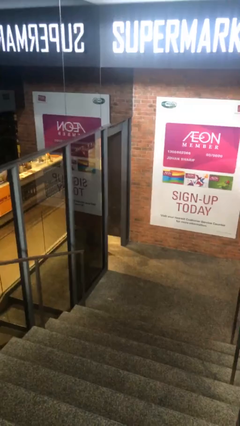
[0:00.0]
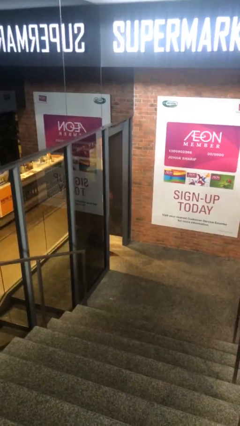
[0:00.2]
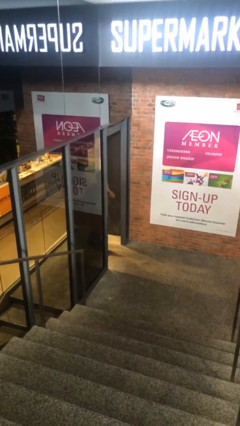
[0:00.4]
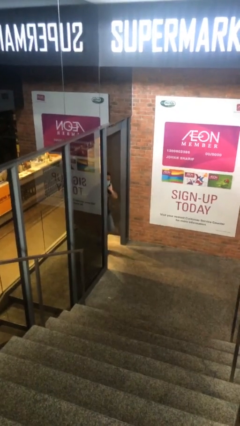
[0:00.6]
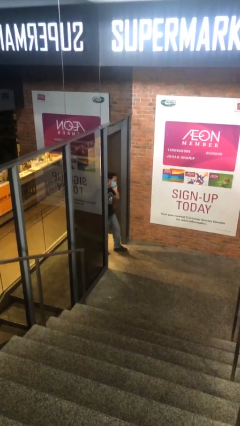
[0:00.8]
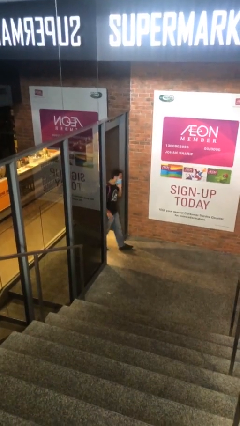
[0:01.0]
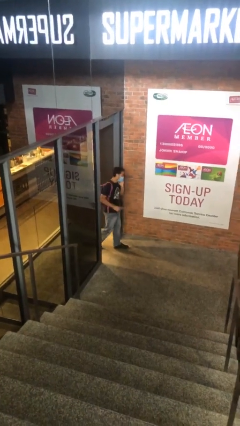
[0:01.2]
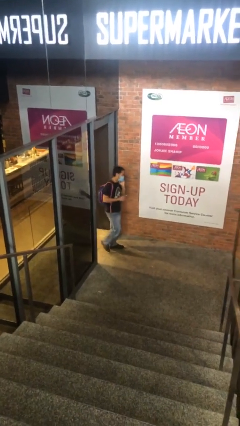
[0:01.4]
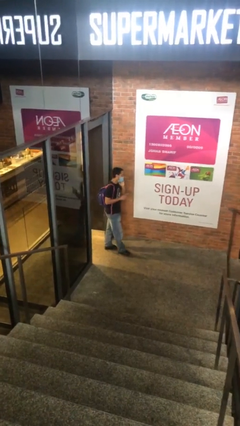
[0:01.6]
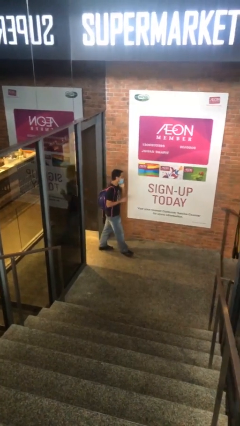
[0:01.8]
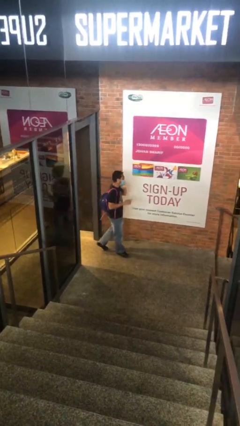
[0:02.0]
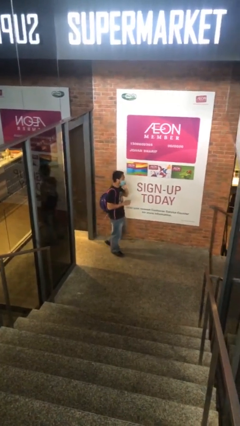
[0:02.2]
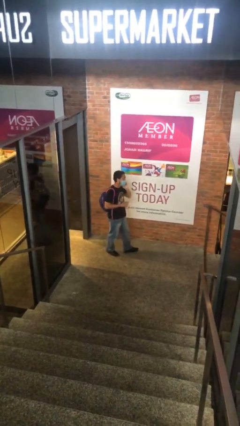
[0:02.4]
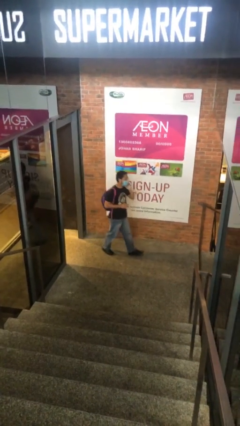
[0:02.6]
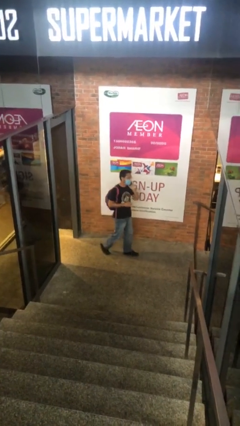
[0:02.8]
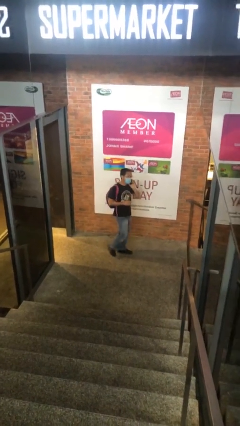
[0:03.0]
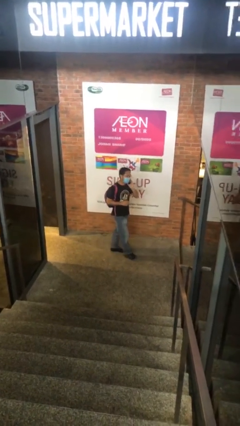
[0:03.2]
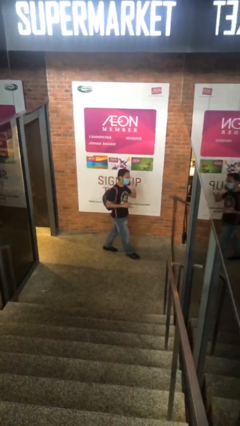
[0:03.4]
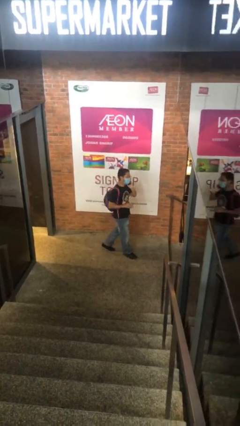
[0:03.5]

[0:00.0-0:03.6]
person enters scene through structure

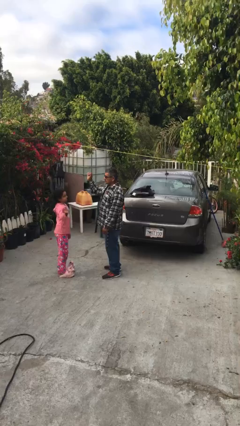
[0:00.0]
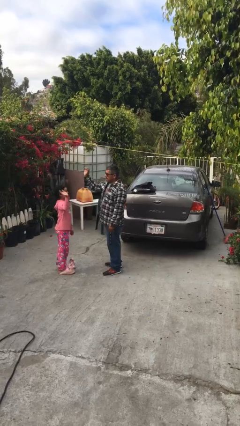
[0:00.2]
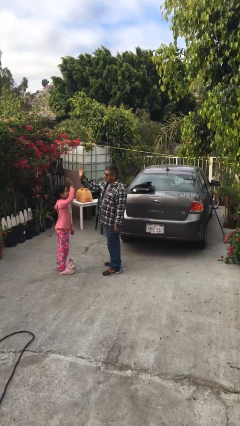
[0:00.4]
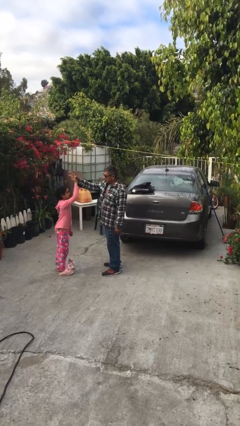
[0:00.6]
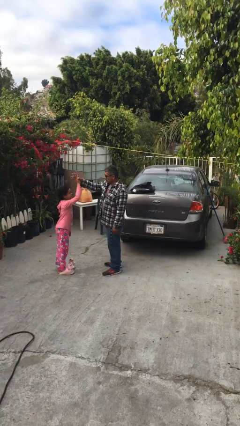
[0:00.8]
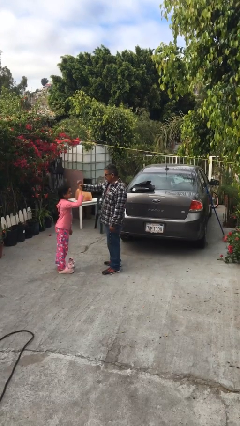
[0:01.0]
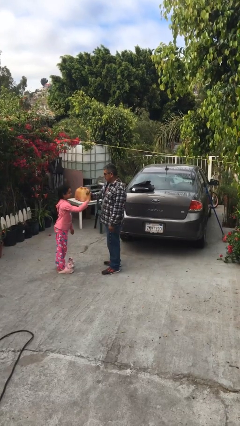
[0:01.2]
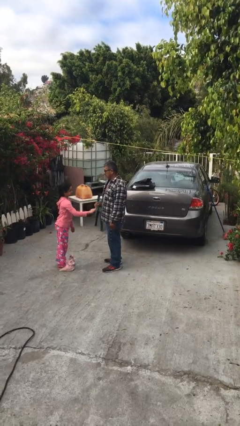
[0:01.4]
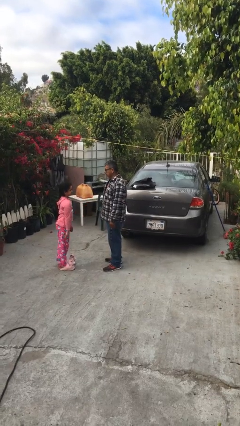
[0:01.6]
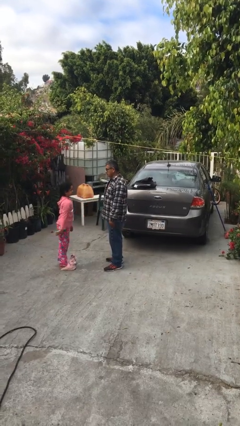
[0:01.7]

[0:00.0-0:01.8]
person highfives hand

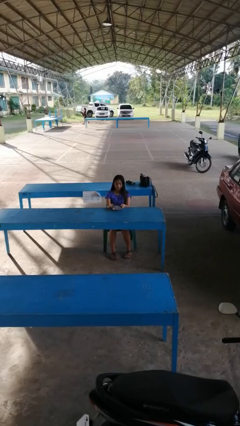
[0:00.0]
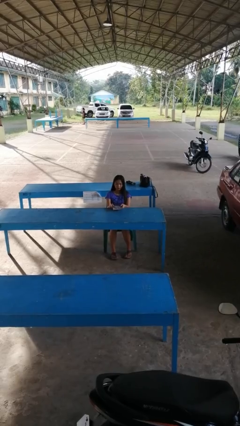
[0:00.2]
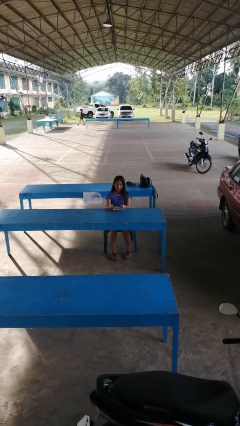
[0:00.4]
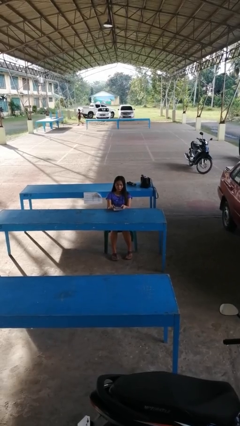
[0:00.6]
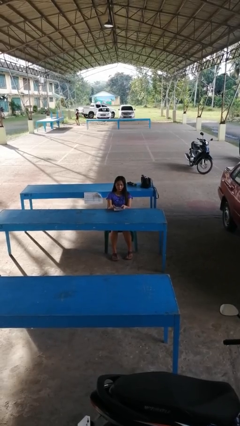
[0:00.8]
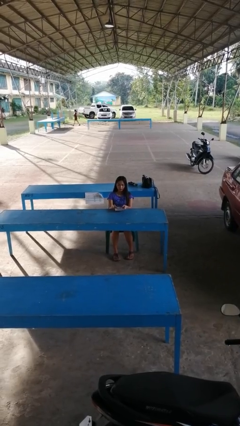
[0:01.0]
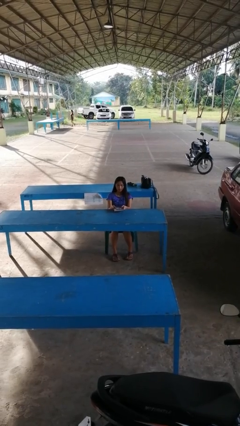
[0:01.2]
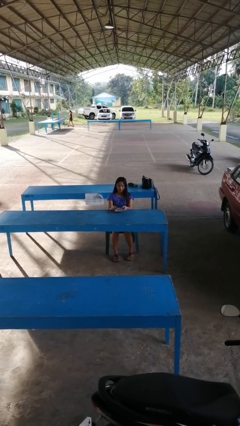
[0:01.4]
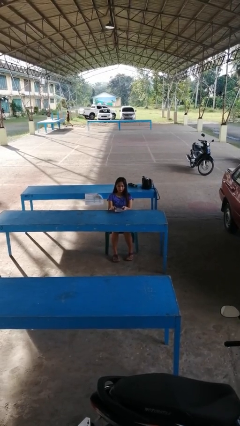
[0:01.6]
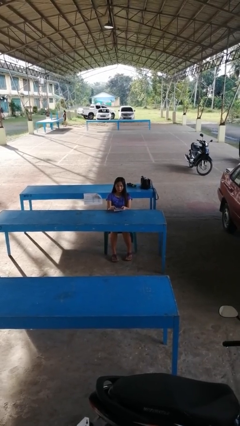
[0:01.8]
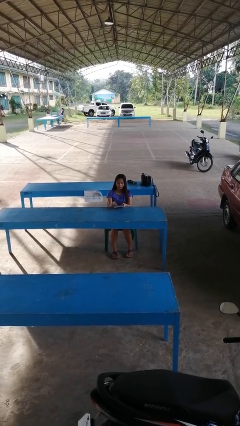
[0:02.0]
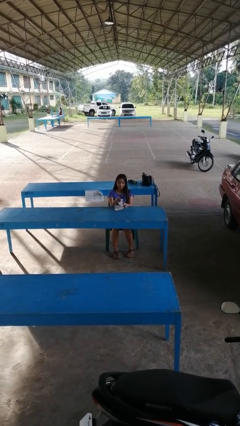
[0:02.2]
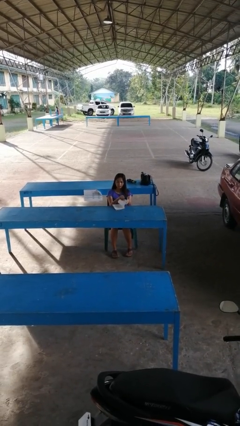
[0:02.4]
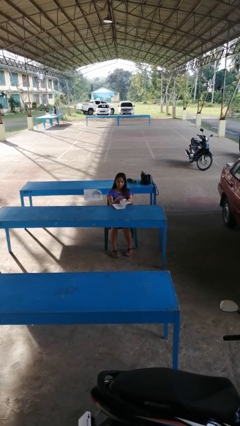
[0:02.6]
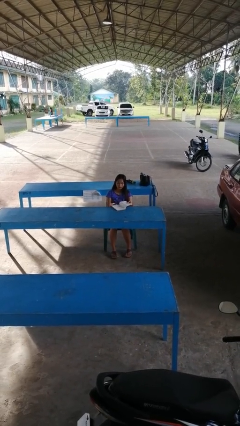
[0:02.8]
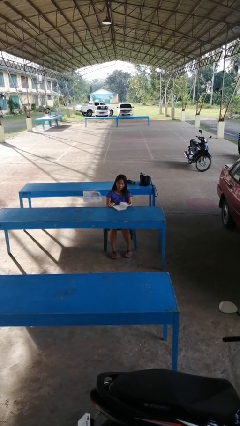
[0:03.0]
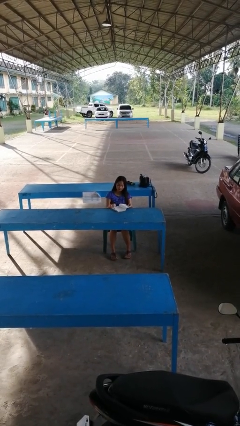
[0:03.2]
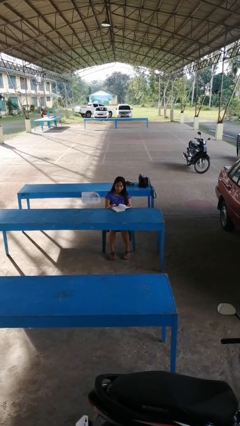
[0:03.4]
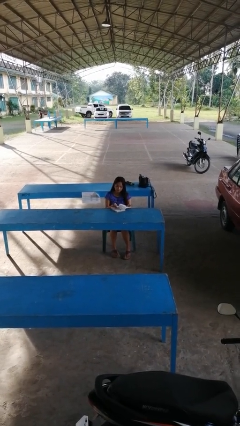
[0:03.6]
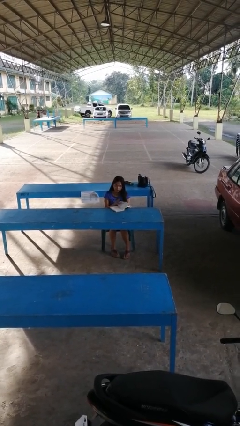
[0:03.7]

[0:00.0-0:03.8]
person reads book

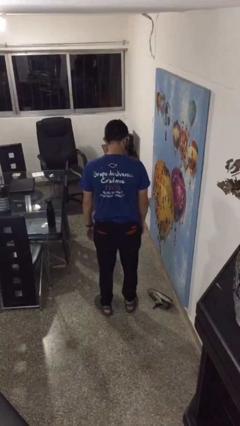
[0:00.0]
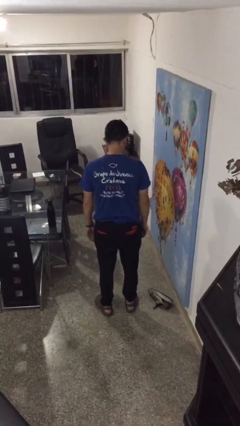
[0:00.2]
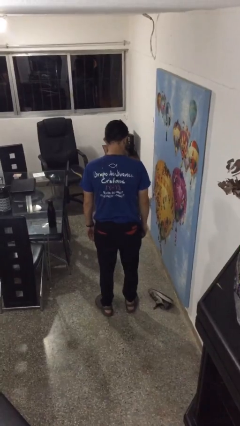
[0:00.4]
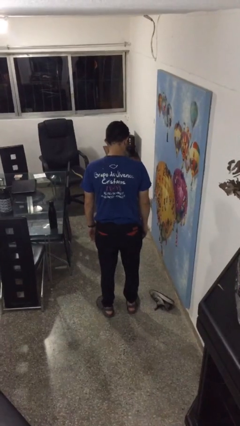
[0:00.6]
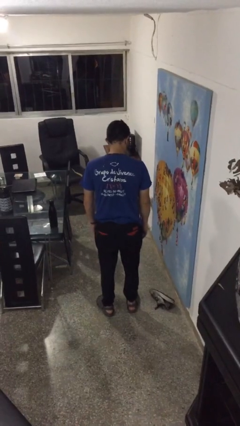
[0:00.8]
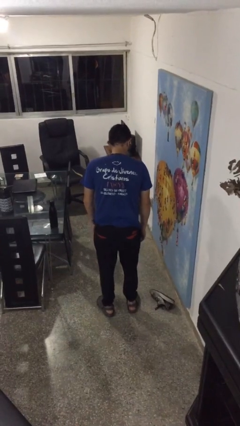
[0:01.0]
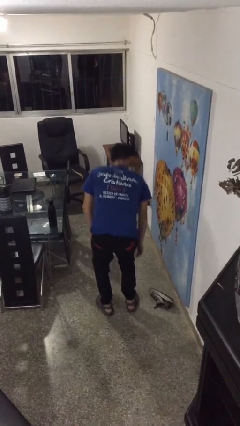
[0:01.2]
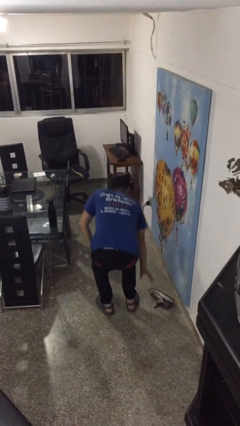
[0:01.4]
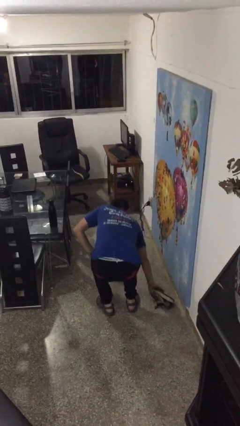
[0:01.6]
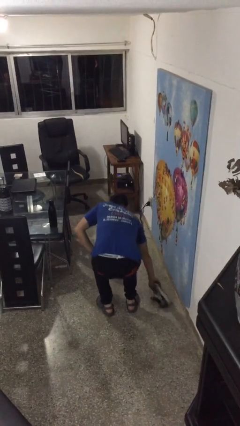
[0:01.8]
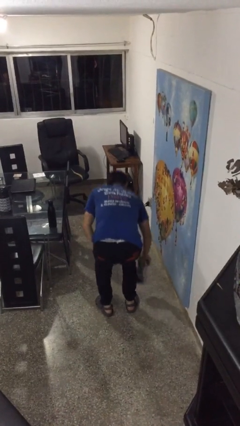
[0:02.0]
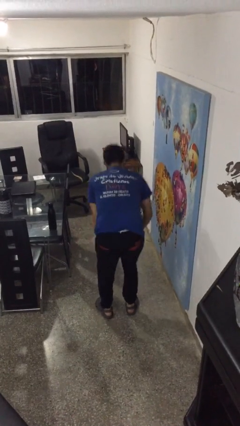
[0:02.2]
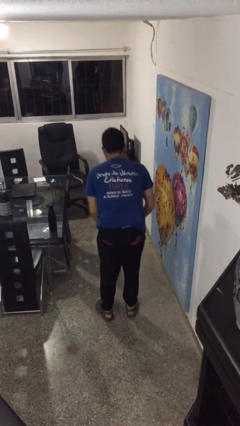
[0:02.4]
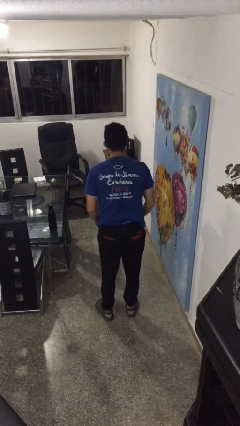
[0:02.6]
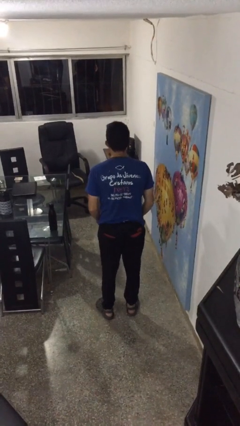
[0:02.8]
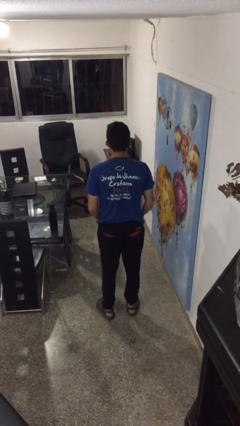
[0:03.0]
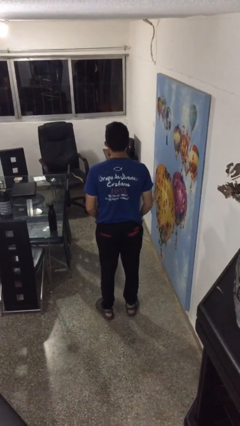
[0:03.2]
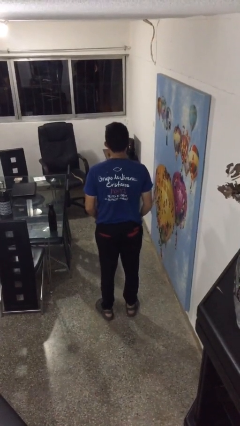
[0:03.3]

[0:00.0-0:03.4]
person picks up object from floor

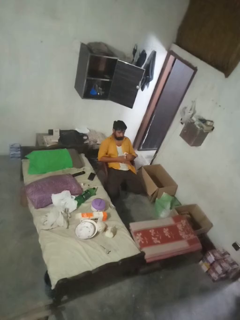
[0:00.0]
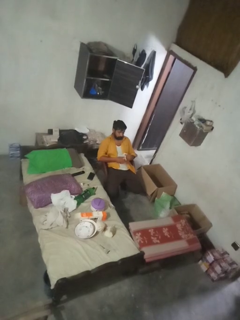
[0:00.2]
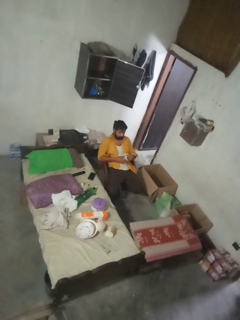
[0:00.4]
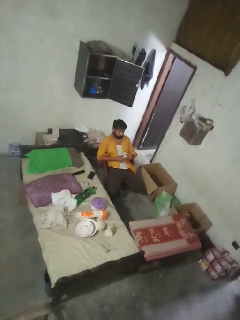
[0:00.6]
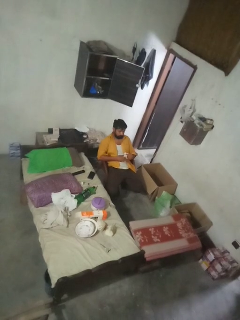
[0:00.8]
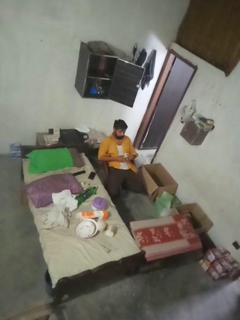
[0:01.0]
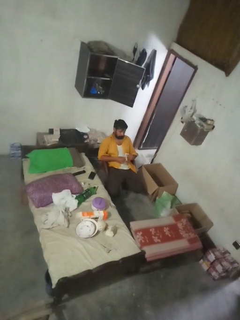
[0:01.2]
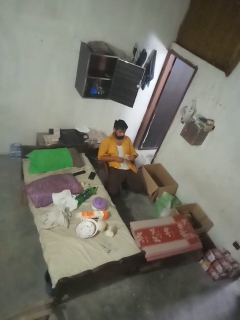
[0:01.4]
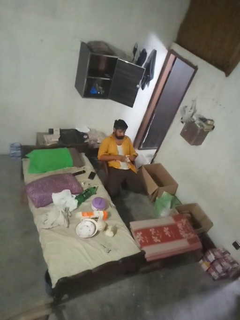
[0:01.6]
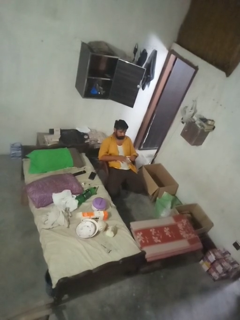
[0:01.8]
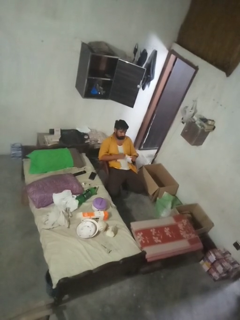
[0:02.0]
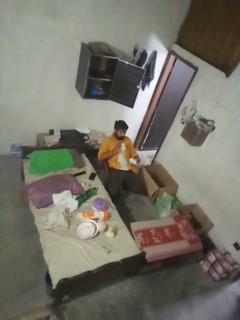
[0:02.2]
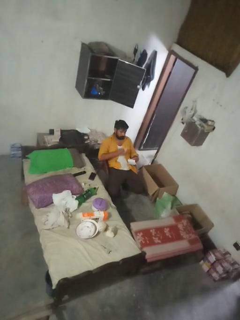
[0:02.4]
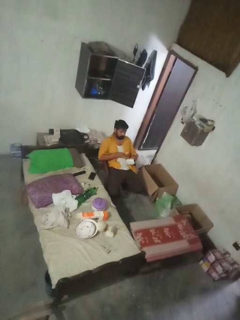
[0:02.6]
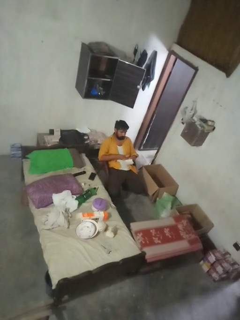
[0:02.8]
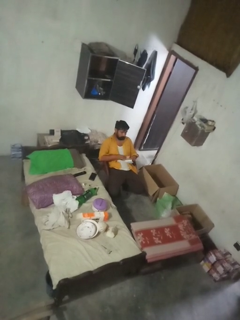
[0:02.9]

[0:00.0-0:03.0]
person tears paper

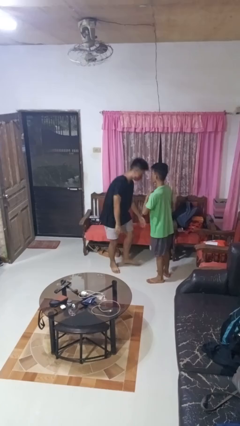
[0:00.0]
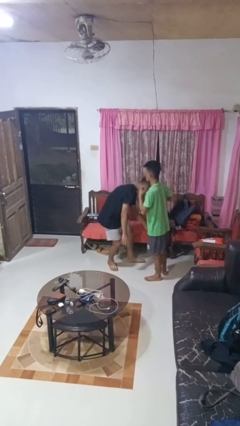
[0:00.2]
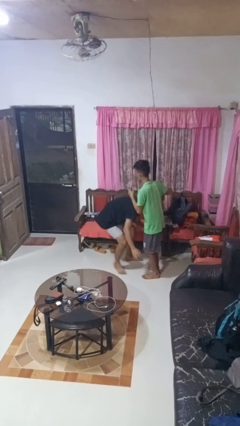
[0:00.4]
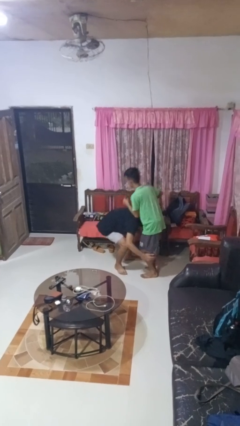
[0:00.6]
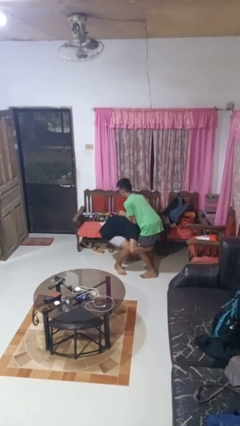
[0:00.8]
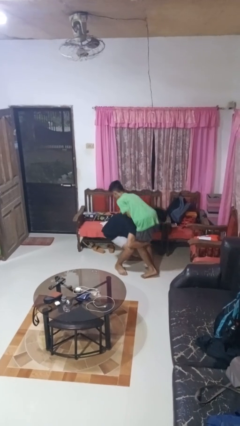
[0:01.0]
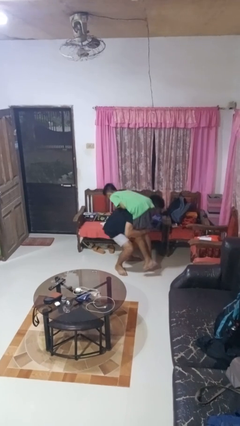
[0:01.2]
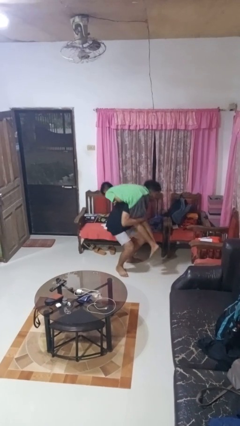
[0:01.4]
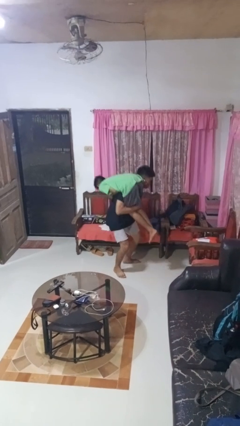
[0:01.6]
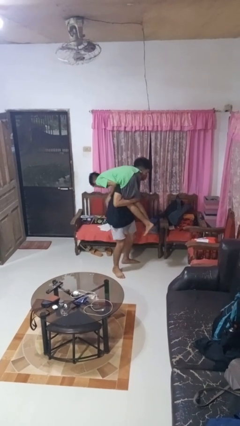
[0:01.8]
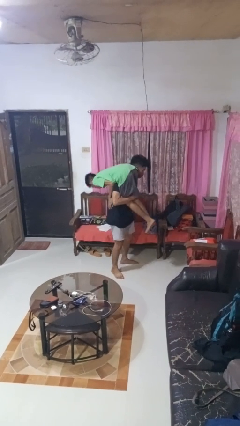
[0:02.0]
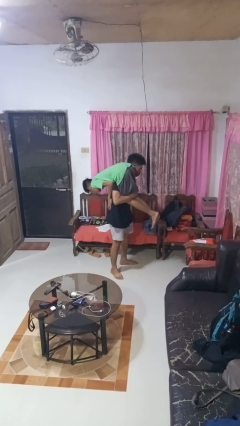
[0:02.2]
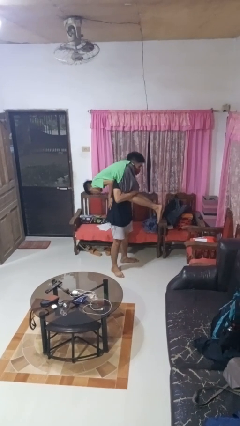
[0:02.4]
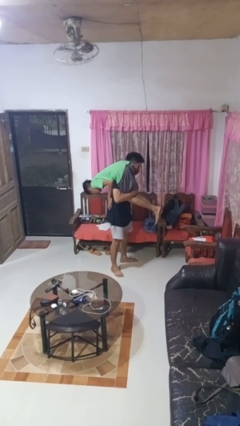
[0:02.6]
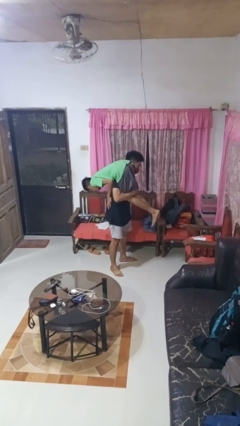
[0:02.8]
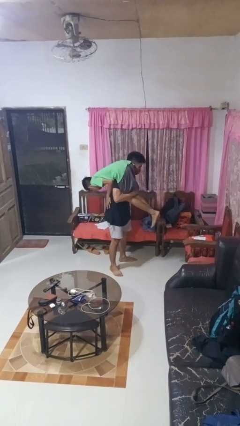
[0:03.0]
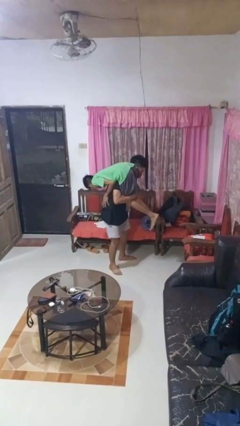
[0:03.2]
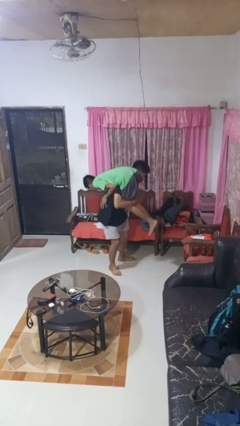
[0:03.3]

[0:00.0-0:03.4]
person carries person over shoulder
